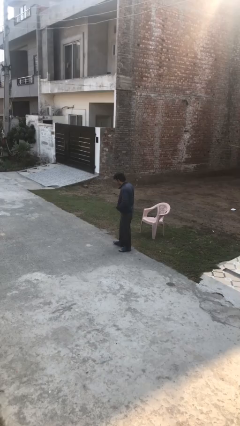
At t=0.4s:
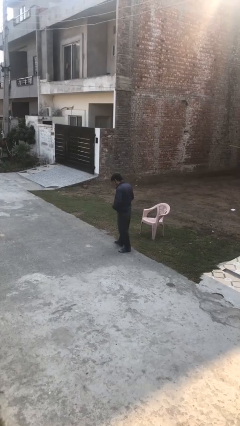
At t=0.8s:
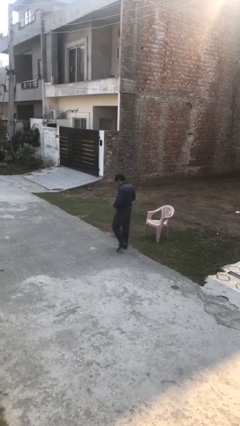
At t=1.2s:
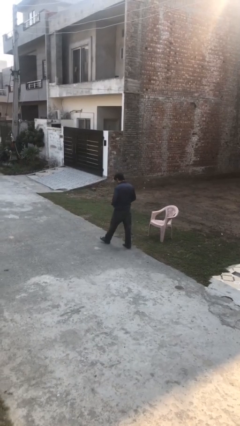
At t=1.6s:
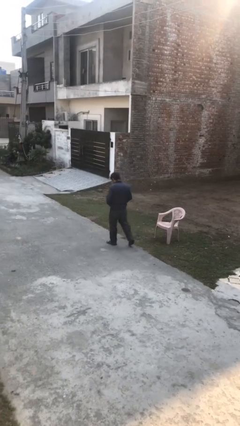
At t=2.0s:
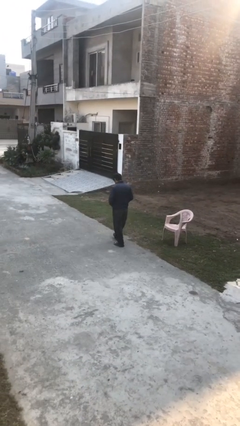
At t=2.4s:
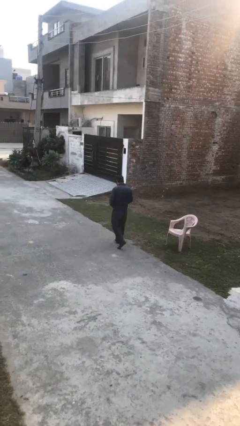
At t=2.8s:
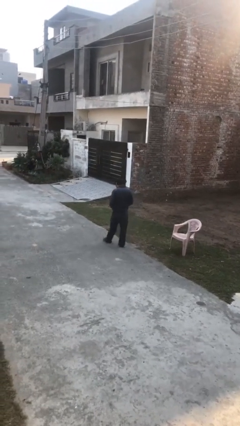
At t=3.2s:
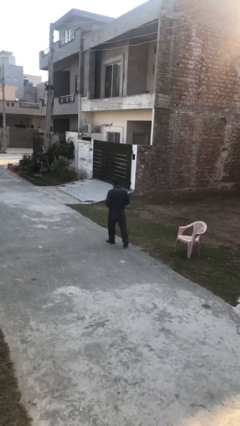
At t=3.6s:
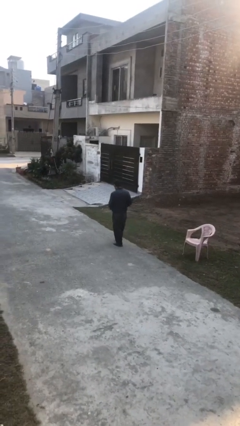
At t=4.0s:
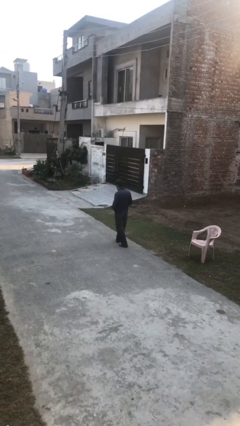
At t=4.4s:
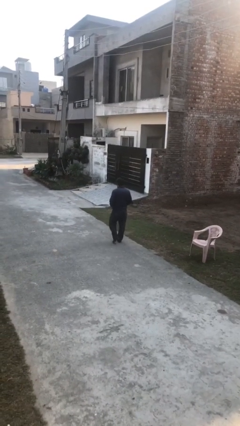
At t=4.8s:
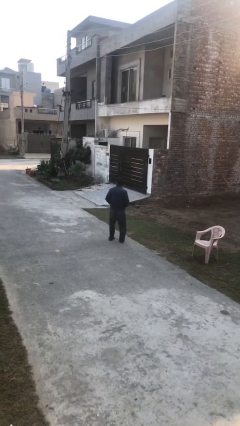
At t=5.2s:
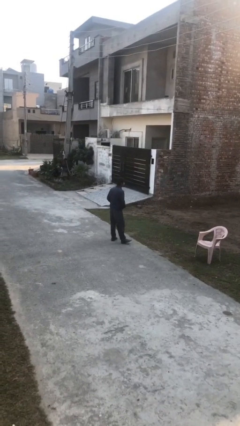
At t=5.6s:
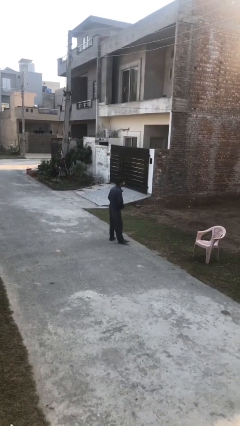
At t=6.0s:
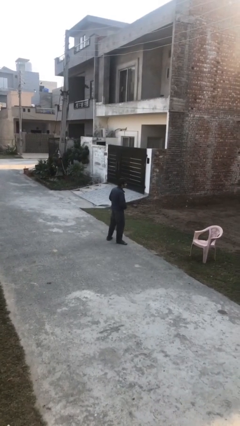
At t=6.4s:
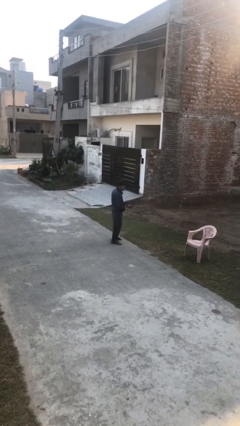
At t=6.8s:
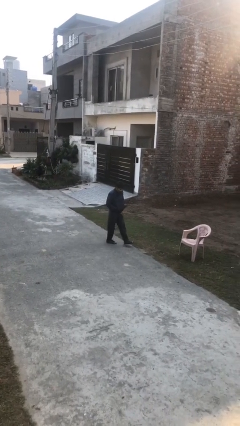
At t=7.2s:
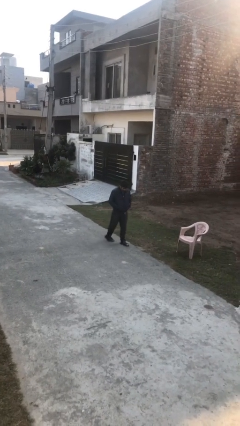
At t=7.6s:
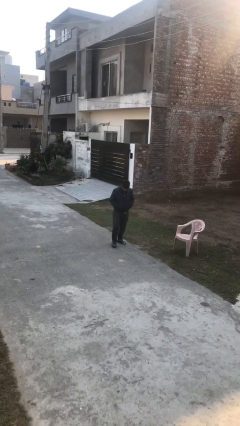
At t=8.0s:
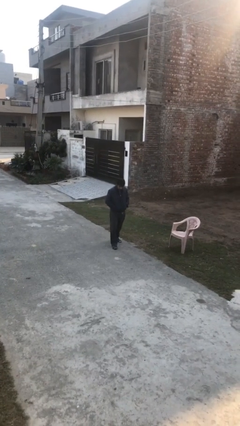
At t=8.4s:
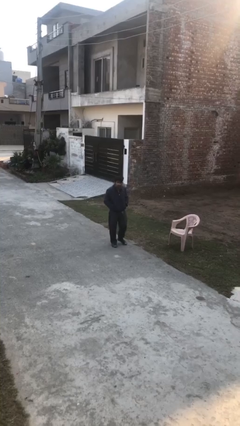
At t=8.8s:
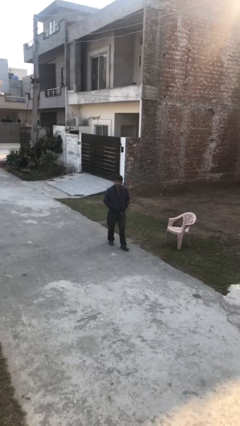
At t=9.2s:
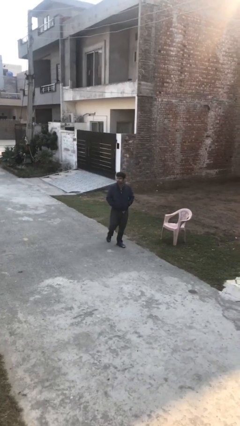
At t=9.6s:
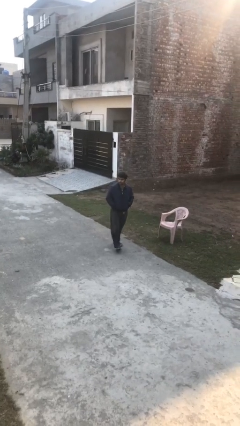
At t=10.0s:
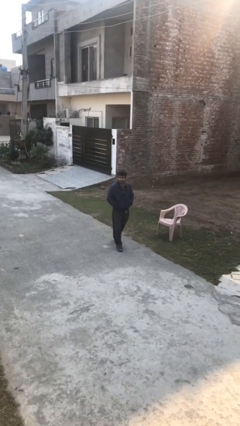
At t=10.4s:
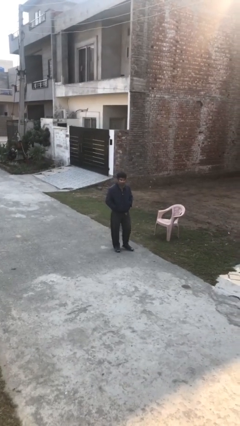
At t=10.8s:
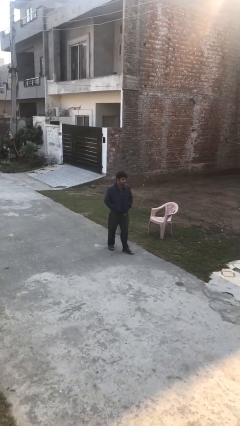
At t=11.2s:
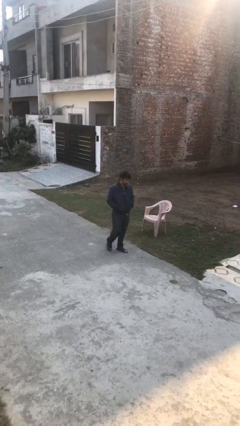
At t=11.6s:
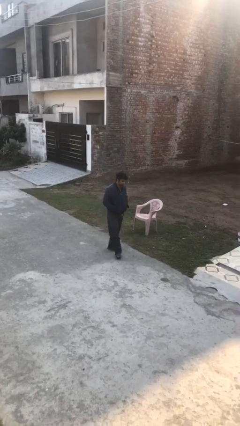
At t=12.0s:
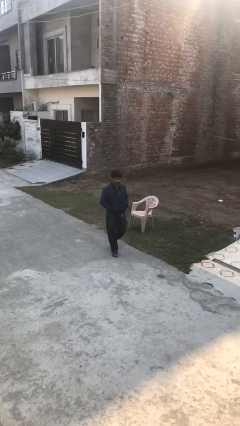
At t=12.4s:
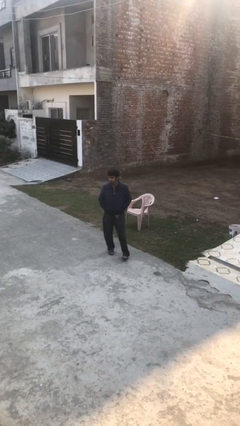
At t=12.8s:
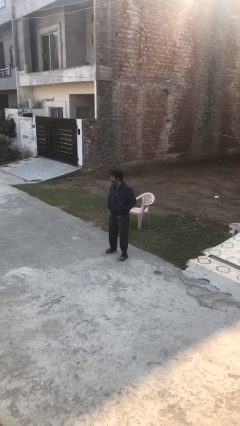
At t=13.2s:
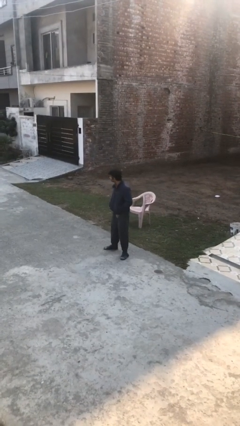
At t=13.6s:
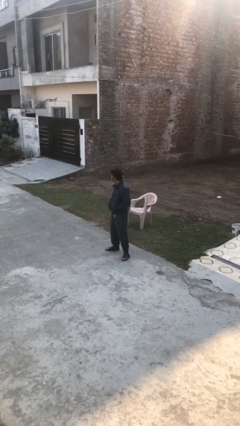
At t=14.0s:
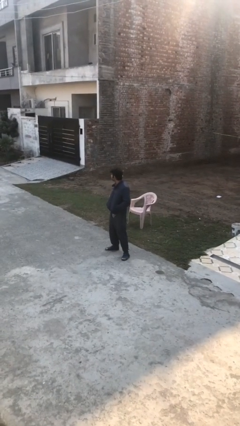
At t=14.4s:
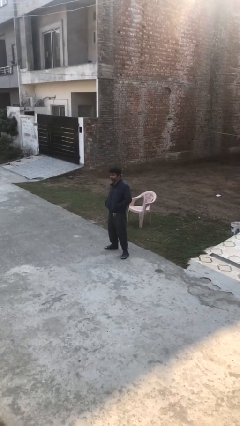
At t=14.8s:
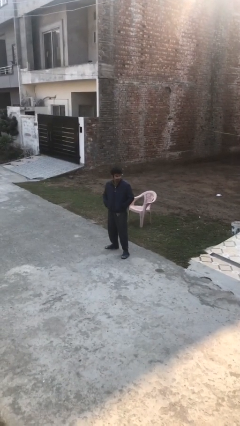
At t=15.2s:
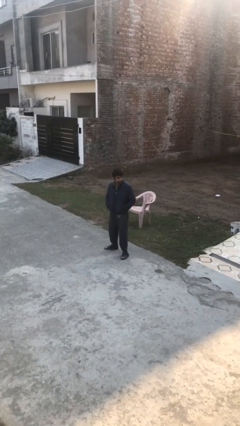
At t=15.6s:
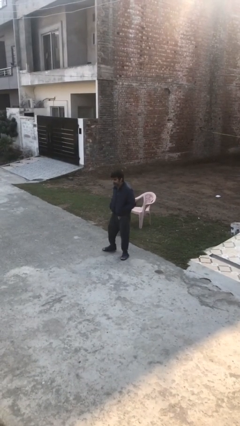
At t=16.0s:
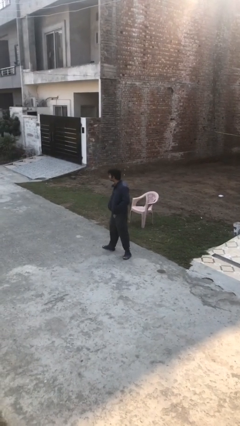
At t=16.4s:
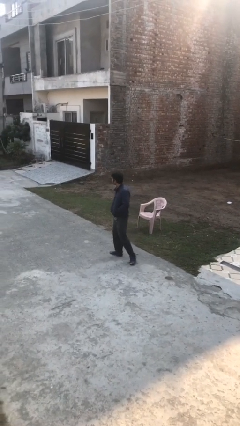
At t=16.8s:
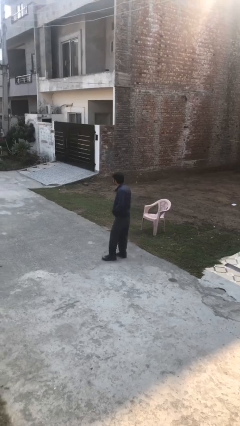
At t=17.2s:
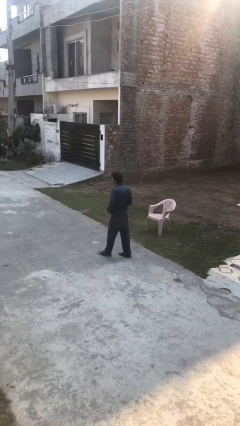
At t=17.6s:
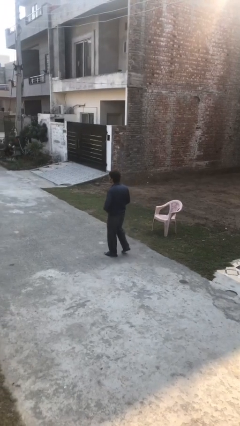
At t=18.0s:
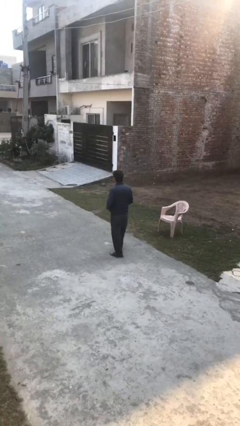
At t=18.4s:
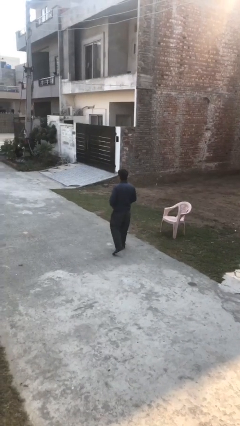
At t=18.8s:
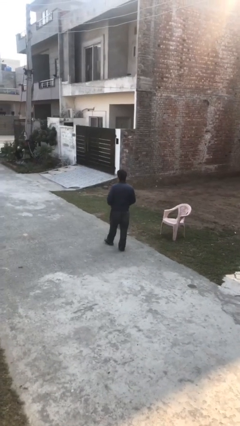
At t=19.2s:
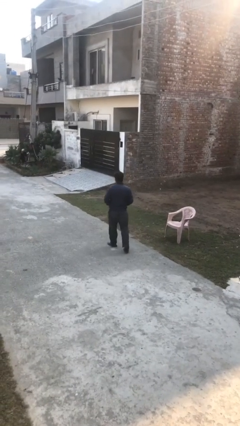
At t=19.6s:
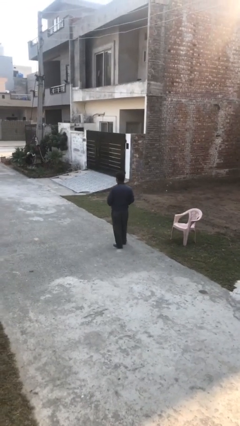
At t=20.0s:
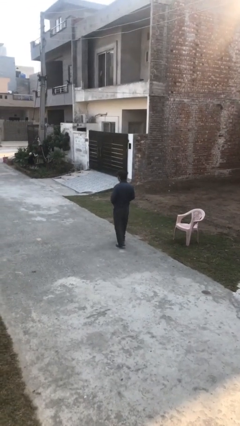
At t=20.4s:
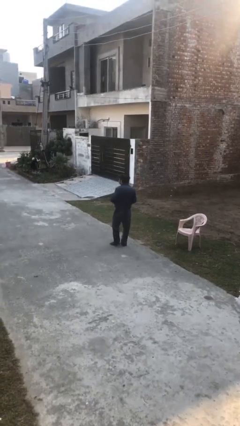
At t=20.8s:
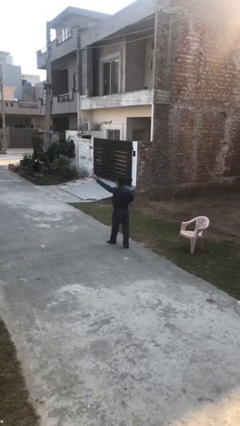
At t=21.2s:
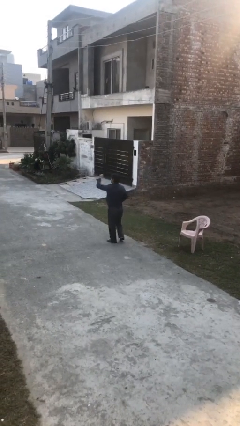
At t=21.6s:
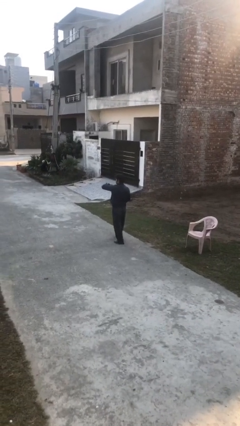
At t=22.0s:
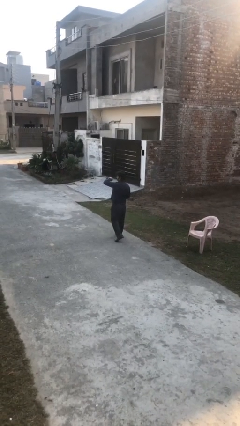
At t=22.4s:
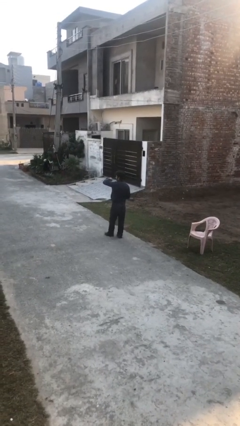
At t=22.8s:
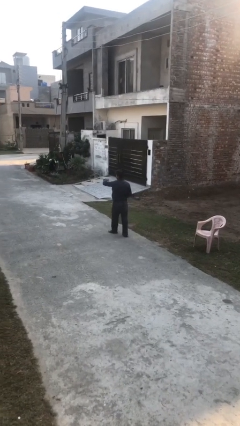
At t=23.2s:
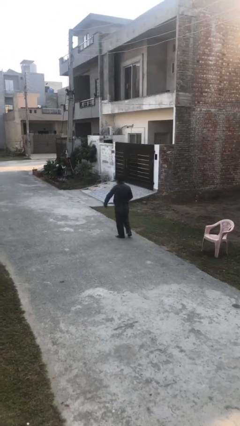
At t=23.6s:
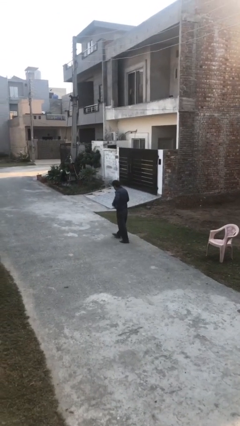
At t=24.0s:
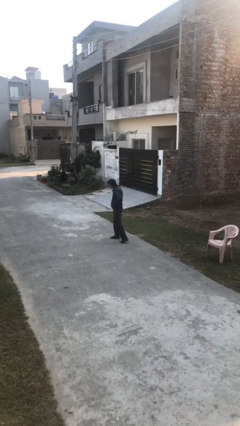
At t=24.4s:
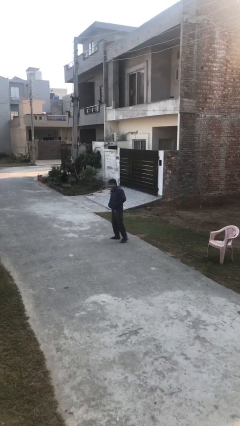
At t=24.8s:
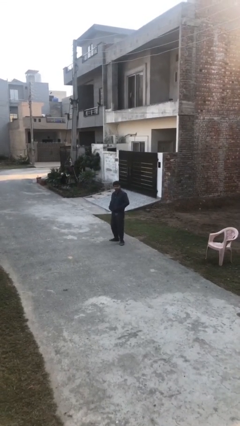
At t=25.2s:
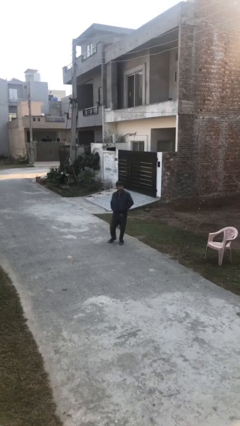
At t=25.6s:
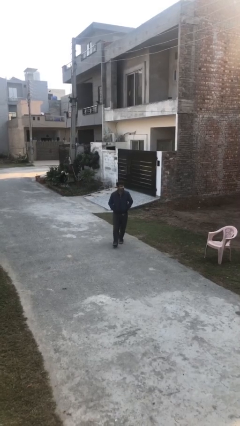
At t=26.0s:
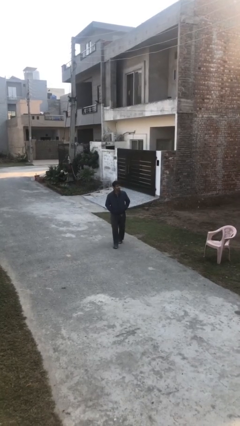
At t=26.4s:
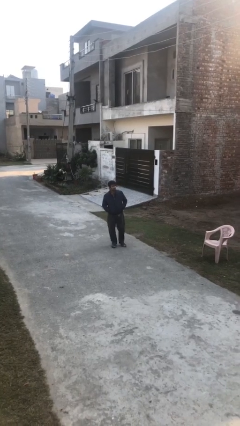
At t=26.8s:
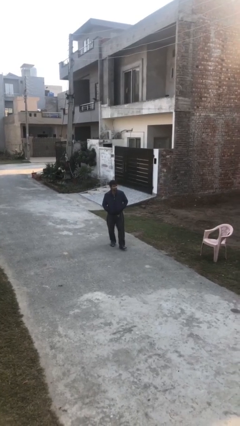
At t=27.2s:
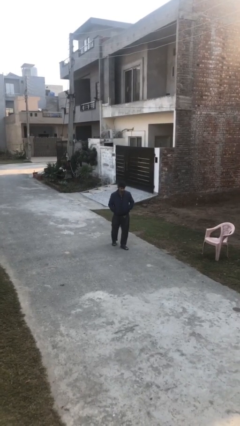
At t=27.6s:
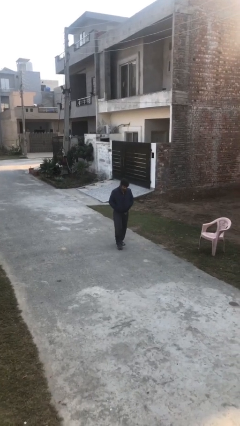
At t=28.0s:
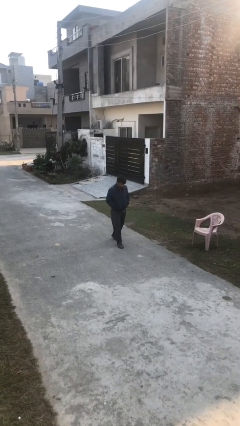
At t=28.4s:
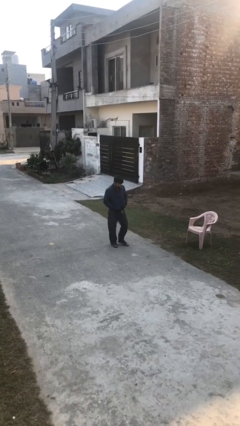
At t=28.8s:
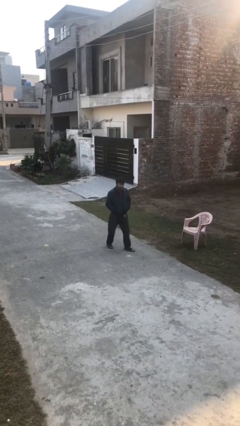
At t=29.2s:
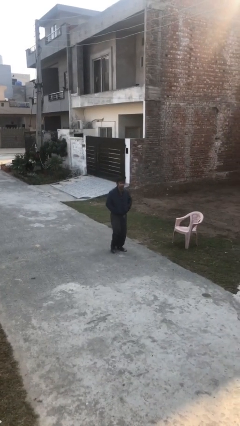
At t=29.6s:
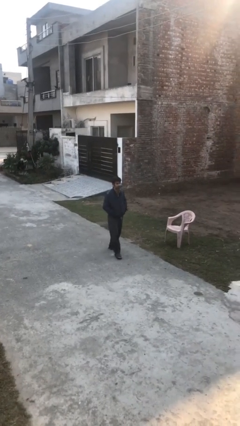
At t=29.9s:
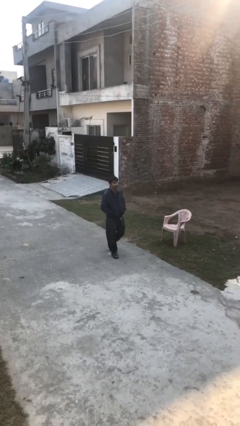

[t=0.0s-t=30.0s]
person walks

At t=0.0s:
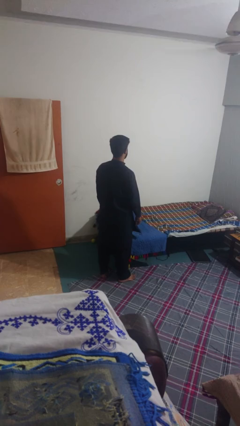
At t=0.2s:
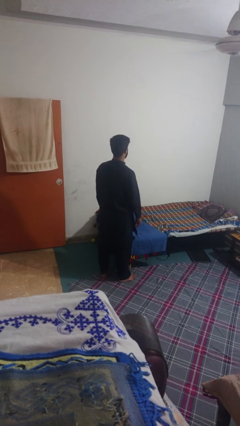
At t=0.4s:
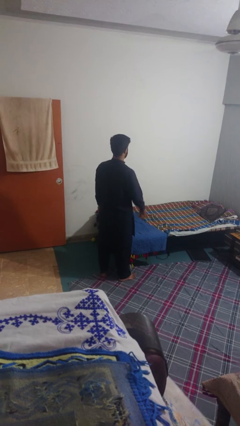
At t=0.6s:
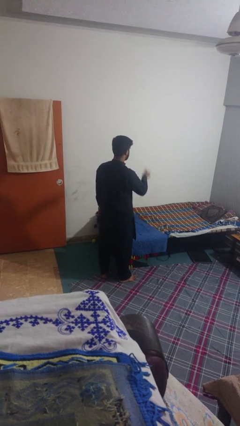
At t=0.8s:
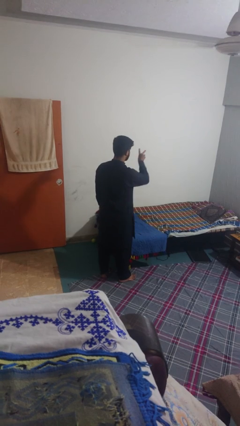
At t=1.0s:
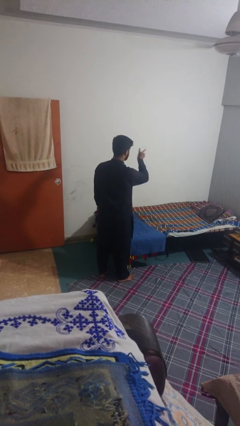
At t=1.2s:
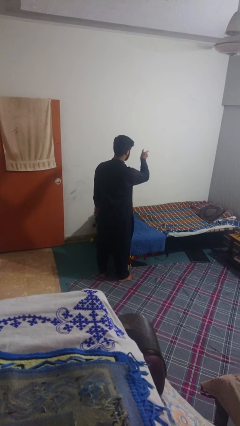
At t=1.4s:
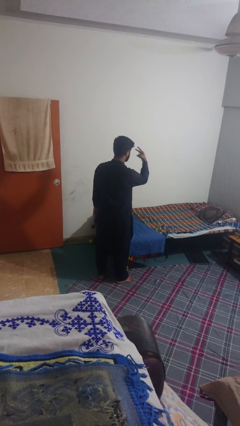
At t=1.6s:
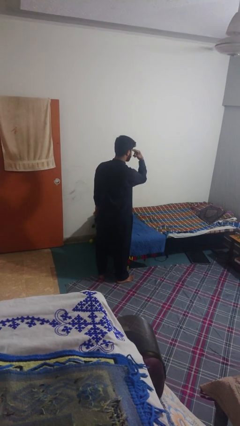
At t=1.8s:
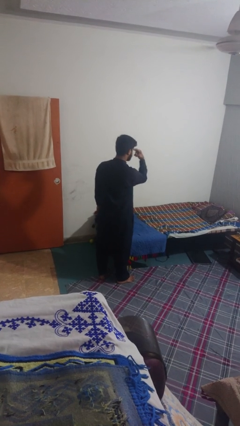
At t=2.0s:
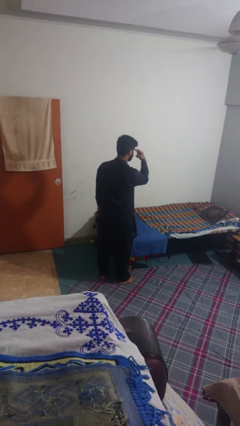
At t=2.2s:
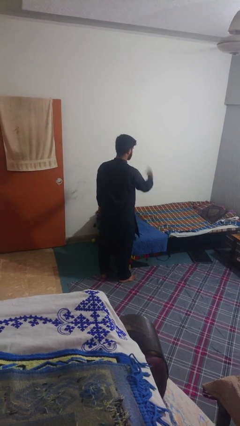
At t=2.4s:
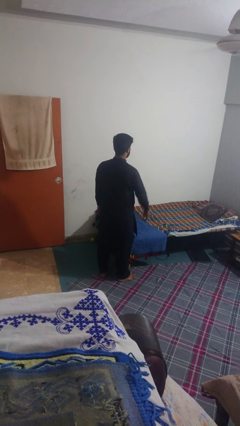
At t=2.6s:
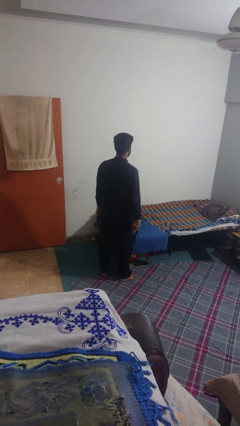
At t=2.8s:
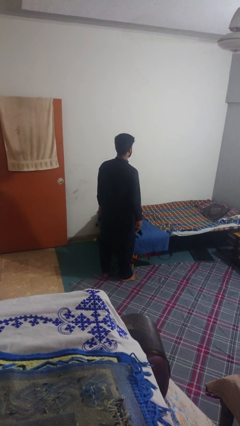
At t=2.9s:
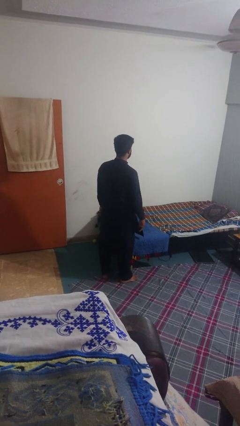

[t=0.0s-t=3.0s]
person gestures watch closely
